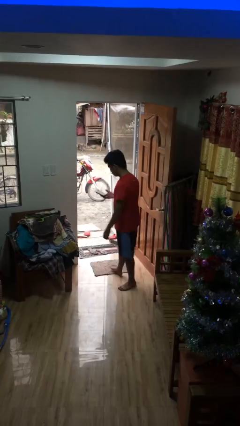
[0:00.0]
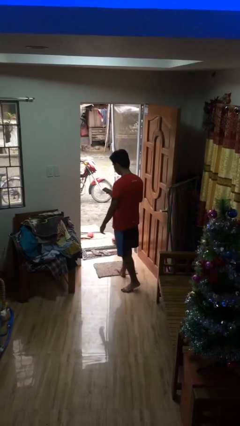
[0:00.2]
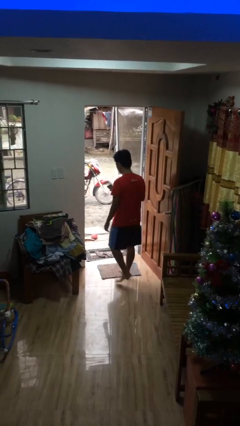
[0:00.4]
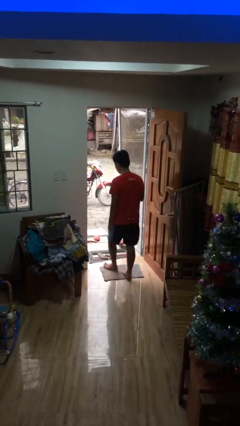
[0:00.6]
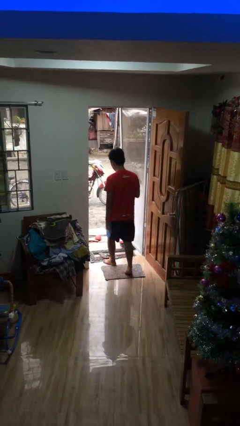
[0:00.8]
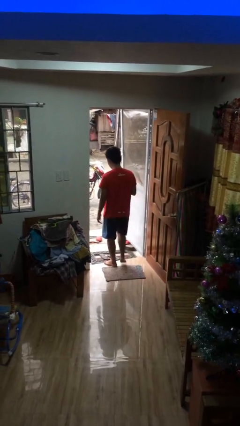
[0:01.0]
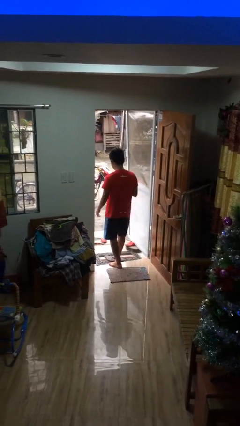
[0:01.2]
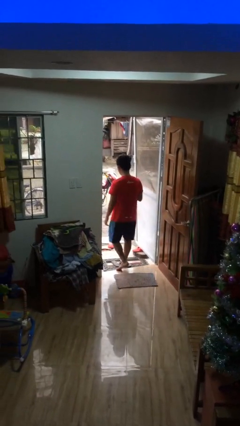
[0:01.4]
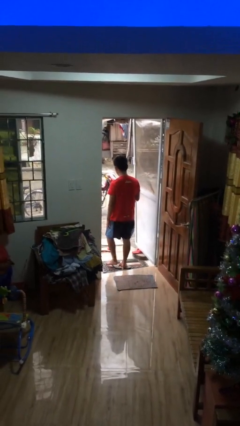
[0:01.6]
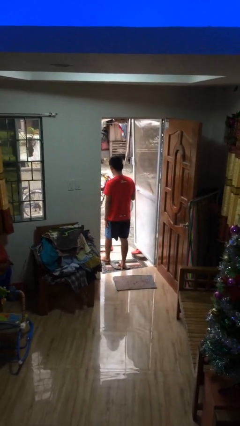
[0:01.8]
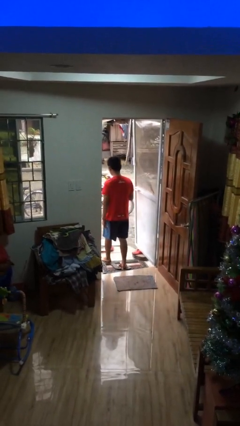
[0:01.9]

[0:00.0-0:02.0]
person exits scene through structure

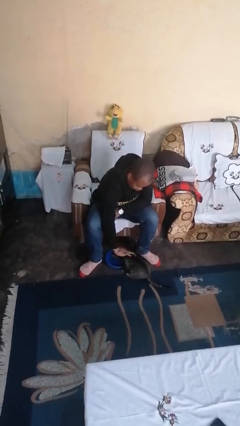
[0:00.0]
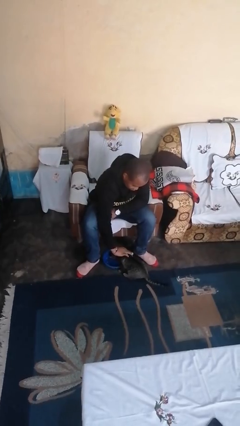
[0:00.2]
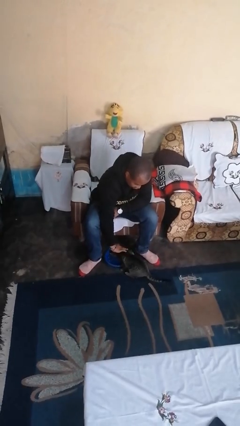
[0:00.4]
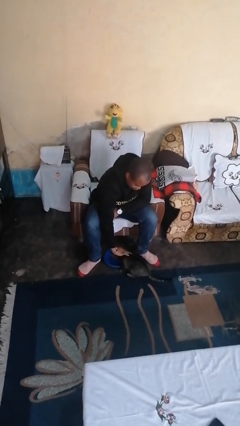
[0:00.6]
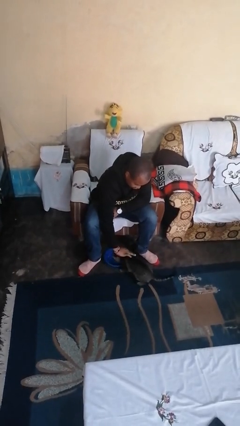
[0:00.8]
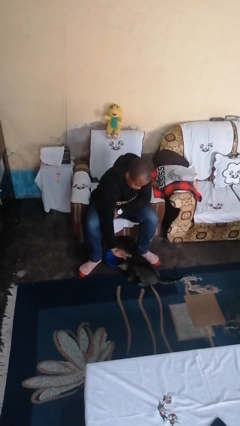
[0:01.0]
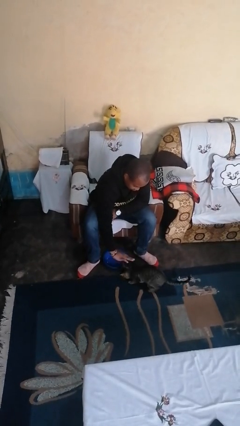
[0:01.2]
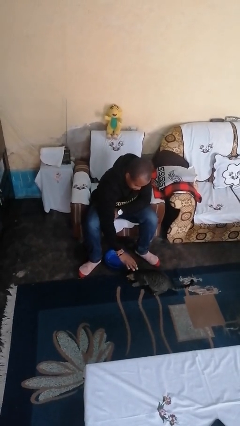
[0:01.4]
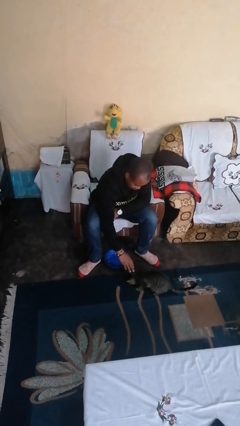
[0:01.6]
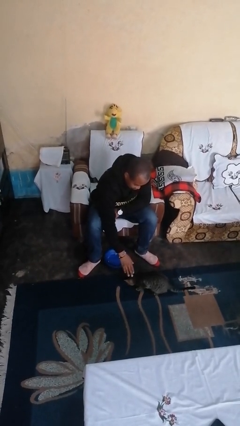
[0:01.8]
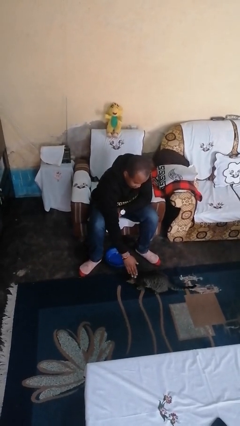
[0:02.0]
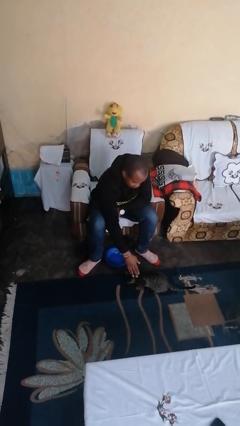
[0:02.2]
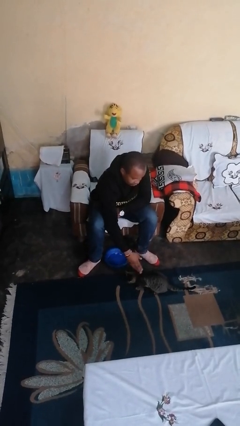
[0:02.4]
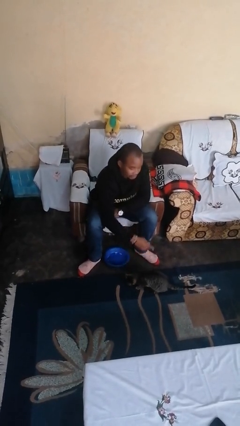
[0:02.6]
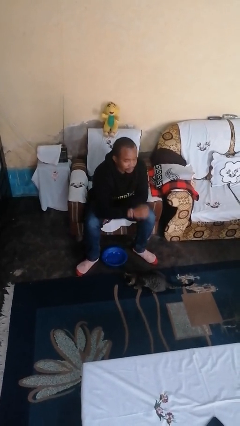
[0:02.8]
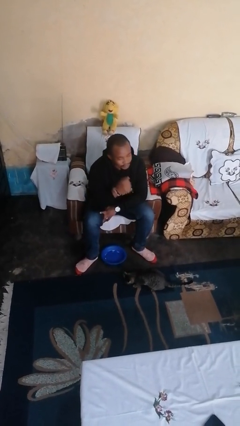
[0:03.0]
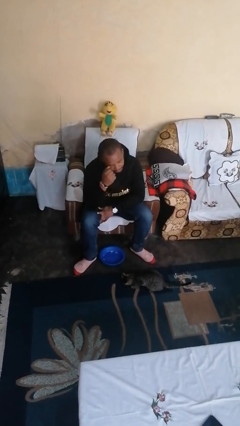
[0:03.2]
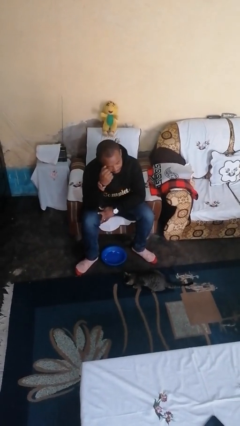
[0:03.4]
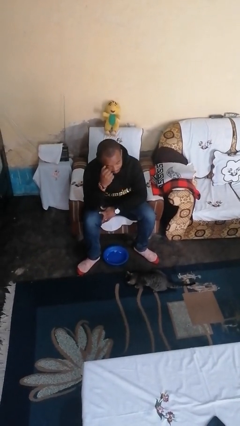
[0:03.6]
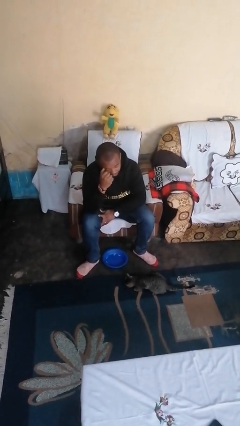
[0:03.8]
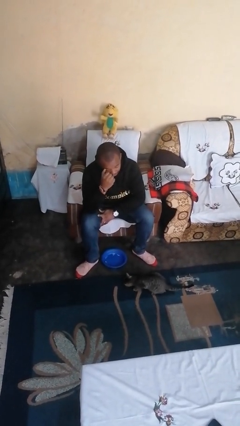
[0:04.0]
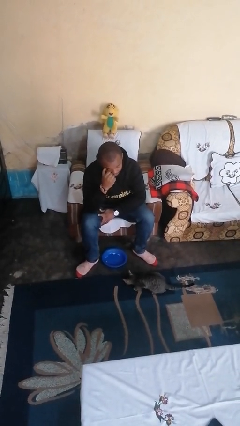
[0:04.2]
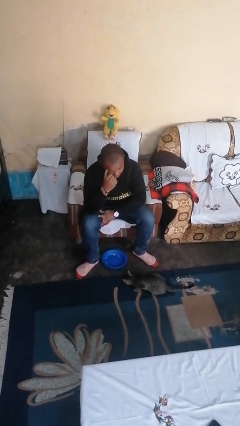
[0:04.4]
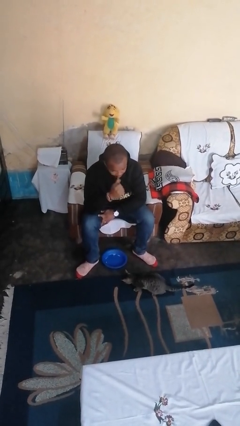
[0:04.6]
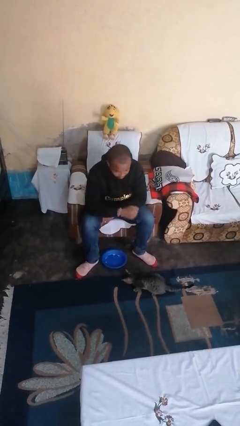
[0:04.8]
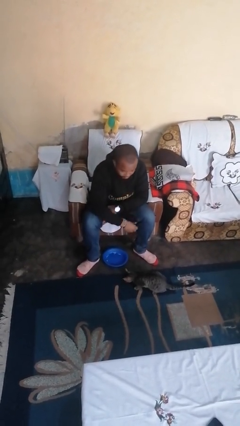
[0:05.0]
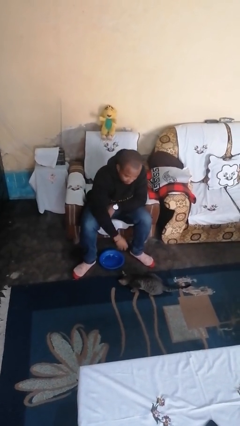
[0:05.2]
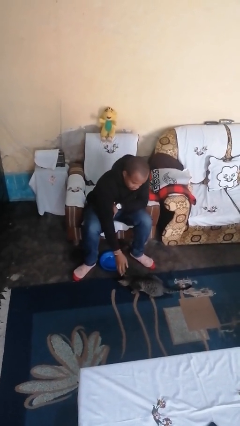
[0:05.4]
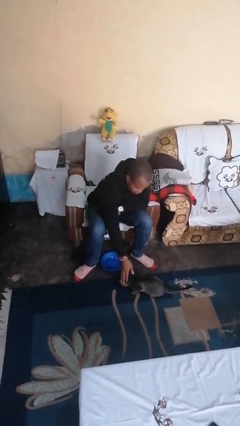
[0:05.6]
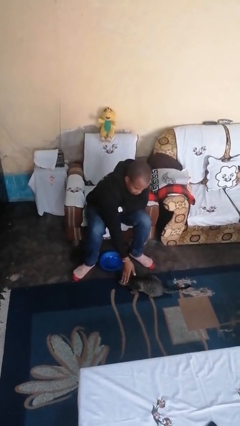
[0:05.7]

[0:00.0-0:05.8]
person hugs cat

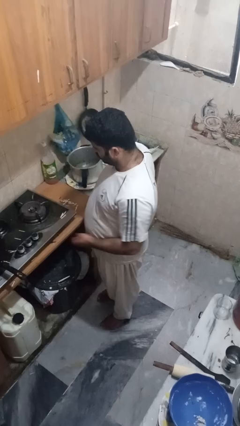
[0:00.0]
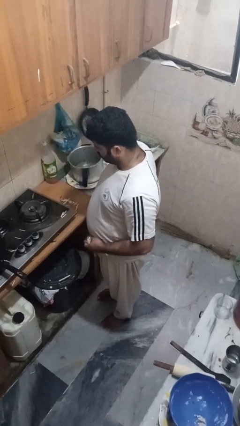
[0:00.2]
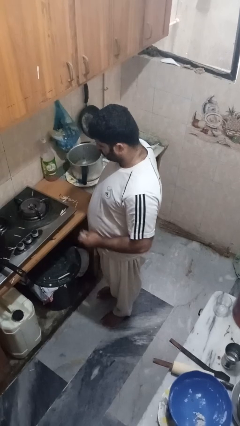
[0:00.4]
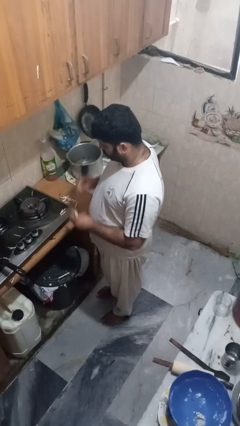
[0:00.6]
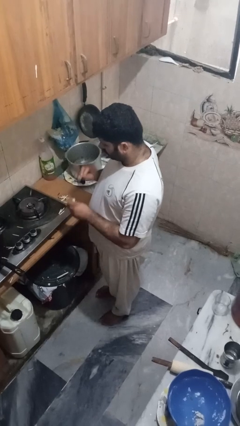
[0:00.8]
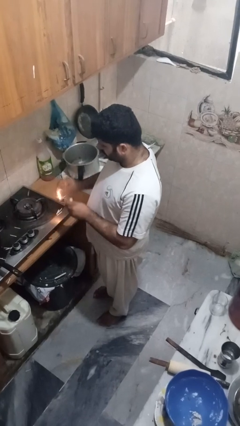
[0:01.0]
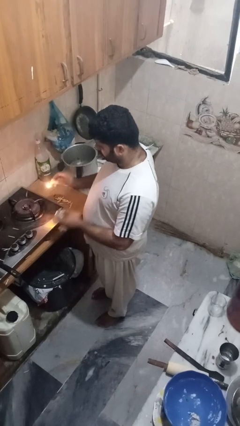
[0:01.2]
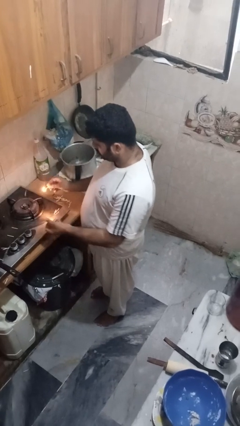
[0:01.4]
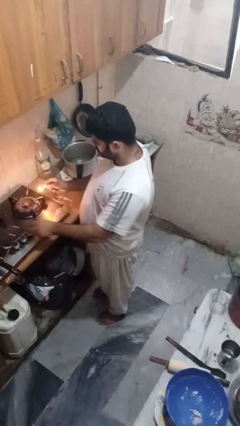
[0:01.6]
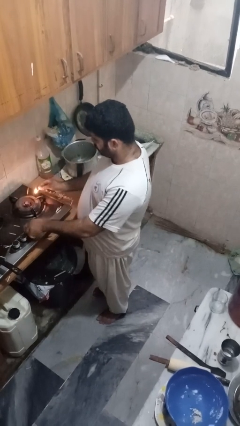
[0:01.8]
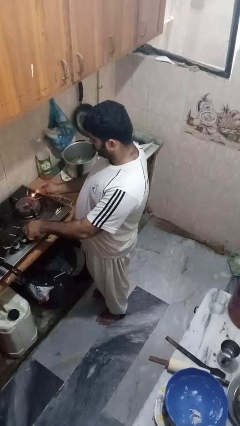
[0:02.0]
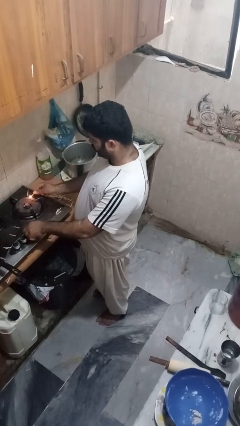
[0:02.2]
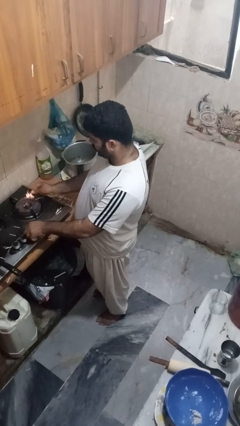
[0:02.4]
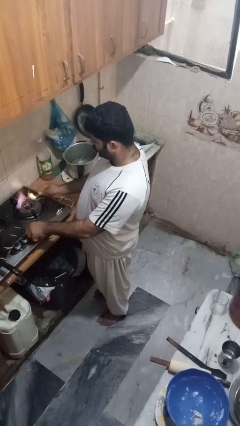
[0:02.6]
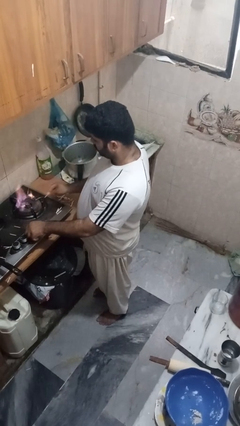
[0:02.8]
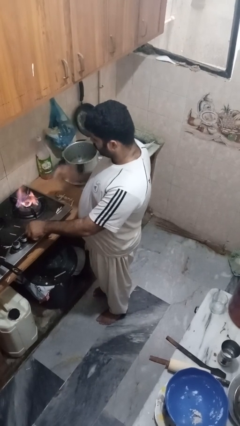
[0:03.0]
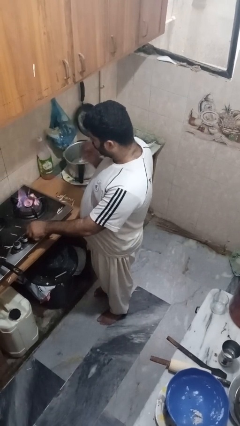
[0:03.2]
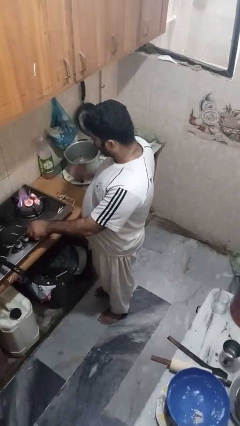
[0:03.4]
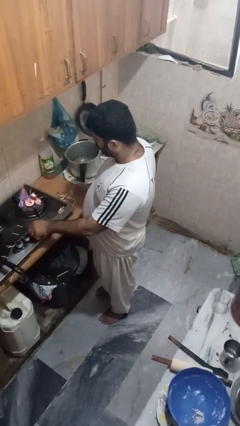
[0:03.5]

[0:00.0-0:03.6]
person turns on stovetop

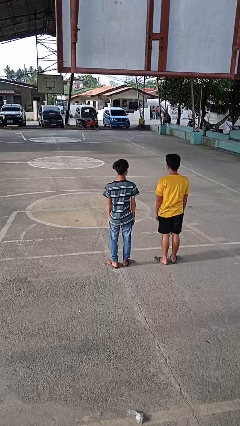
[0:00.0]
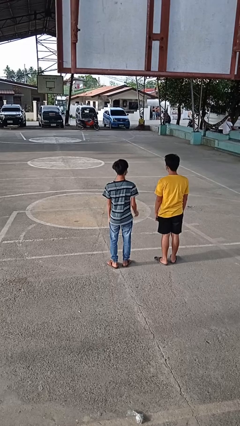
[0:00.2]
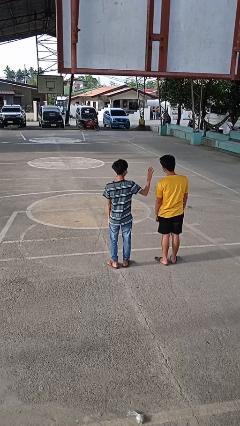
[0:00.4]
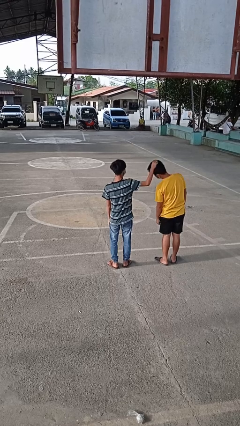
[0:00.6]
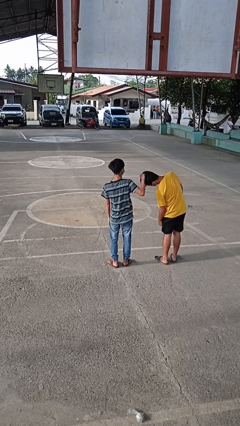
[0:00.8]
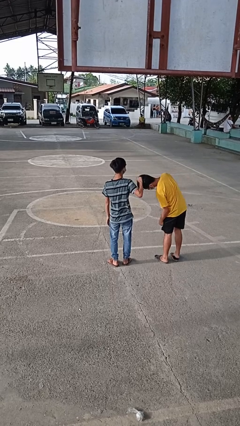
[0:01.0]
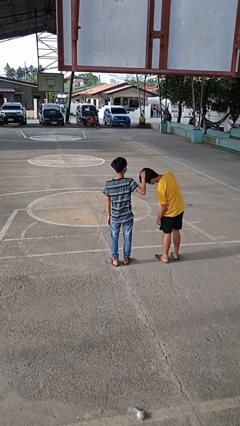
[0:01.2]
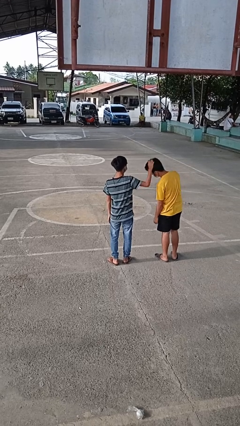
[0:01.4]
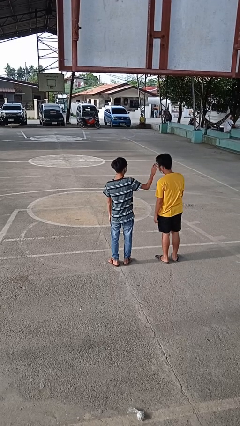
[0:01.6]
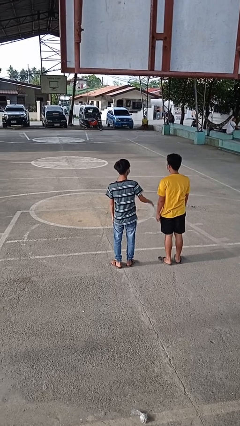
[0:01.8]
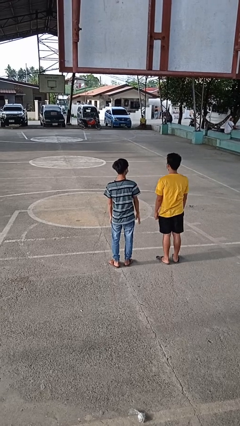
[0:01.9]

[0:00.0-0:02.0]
person grabs person by hair

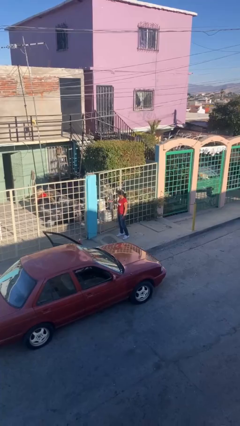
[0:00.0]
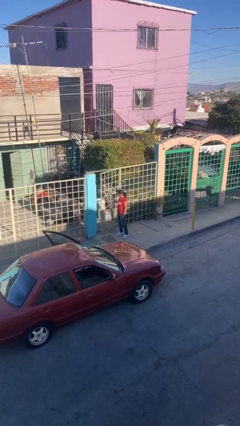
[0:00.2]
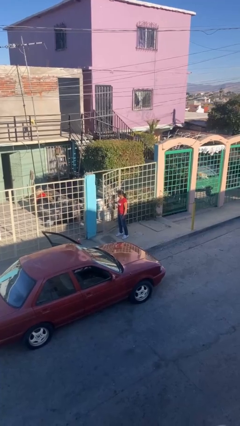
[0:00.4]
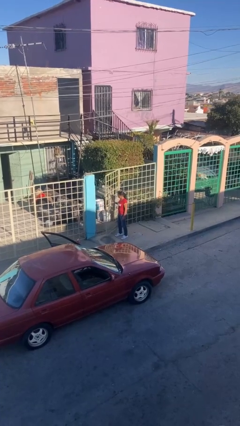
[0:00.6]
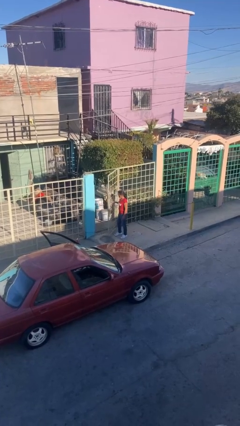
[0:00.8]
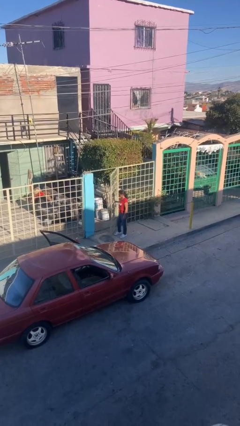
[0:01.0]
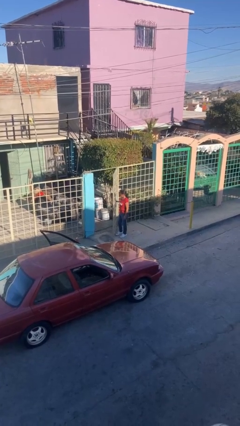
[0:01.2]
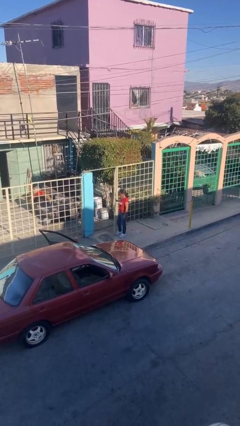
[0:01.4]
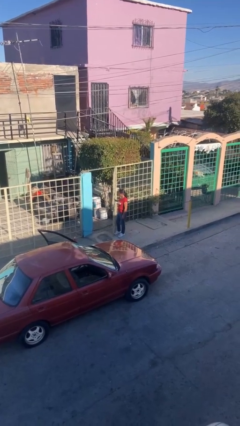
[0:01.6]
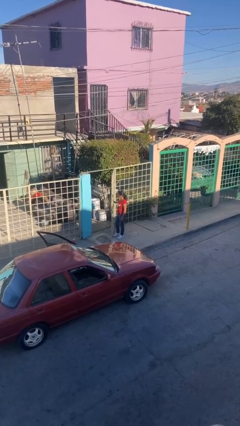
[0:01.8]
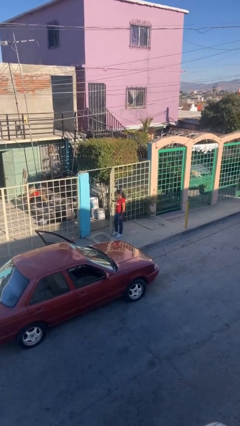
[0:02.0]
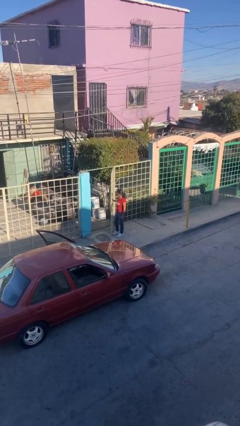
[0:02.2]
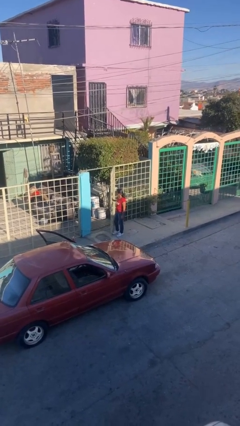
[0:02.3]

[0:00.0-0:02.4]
person opens facility door

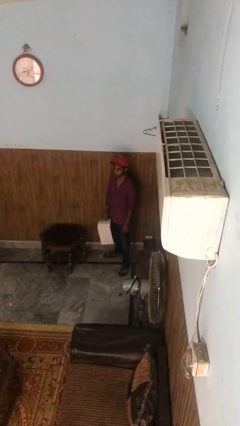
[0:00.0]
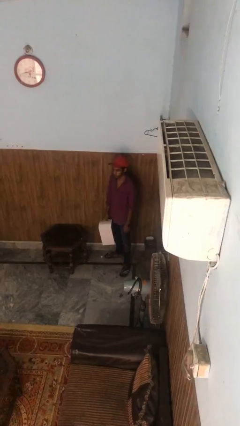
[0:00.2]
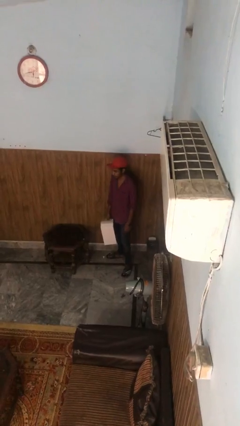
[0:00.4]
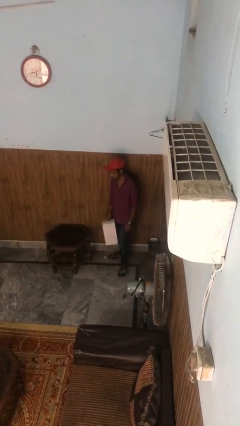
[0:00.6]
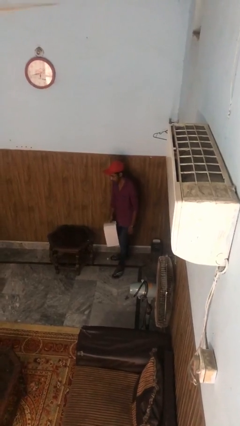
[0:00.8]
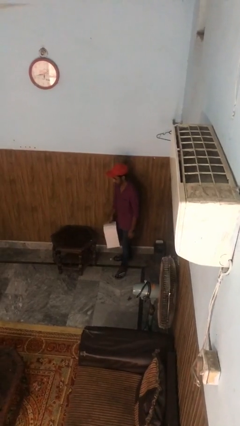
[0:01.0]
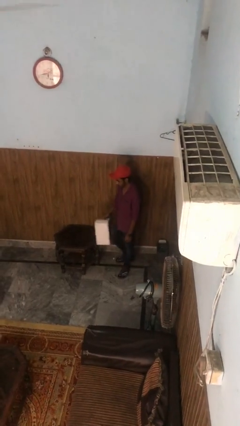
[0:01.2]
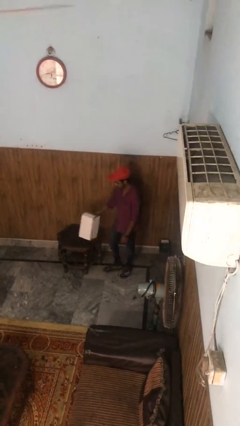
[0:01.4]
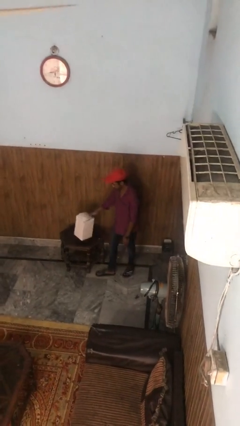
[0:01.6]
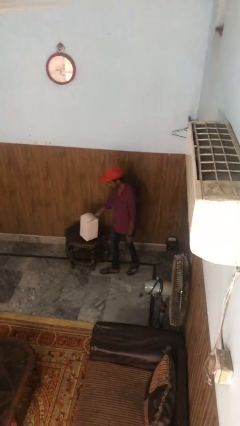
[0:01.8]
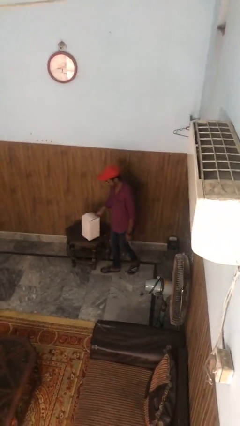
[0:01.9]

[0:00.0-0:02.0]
person puts down object on table
